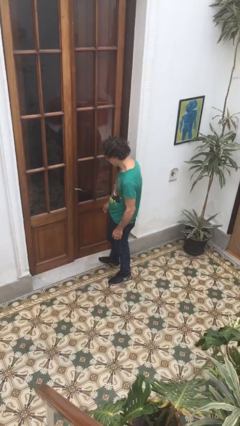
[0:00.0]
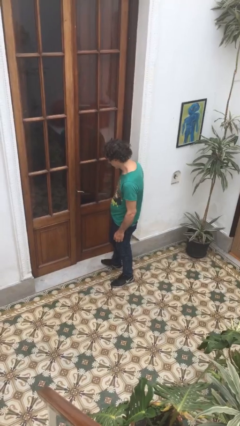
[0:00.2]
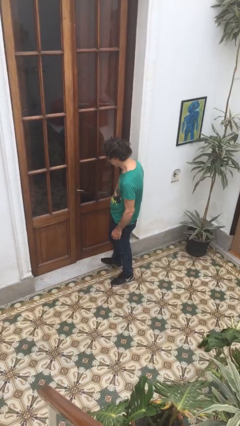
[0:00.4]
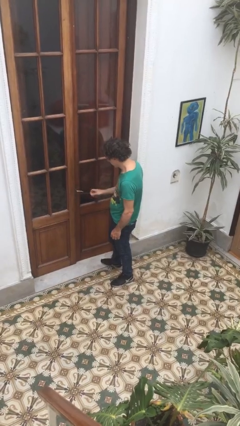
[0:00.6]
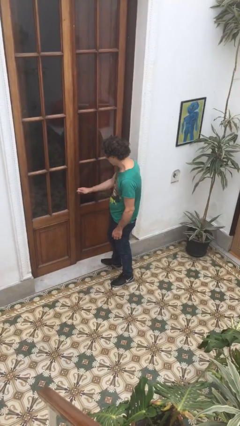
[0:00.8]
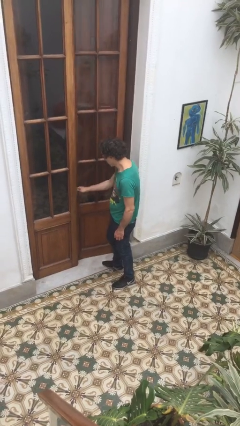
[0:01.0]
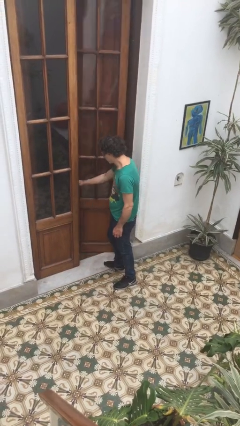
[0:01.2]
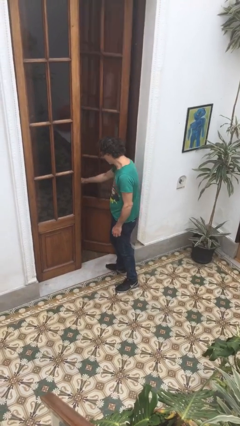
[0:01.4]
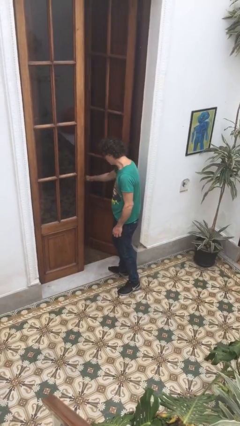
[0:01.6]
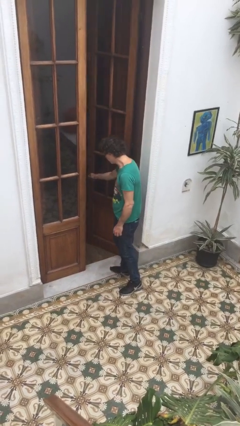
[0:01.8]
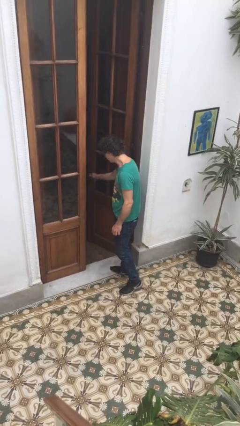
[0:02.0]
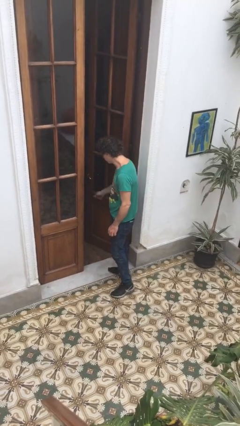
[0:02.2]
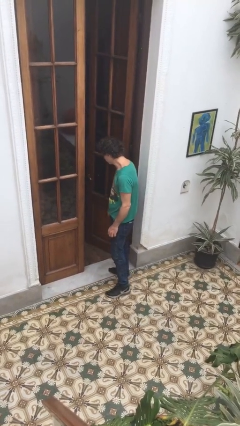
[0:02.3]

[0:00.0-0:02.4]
person opens facility door

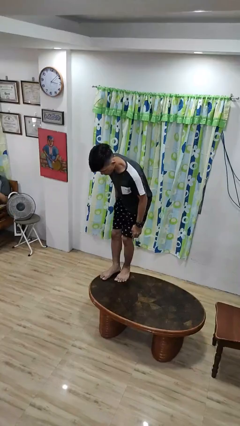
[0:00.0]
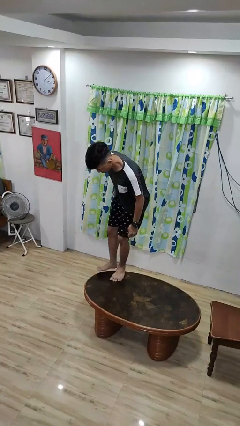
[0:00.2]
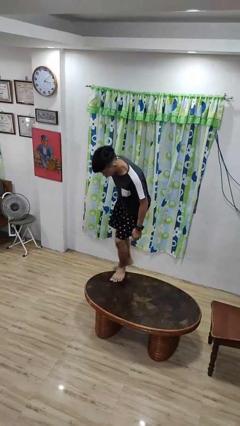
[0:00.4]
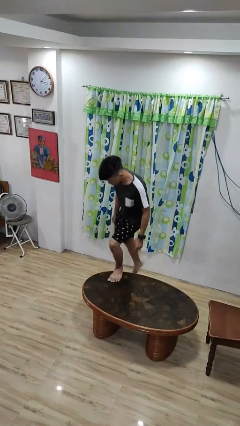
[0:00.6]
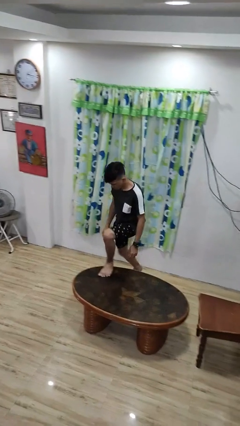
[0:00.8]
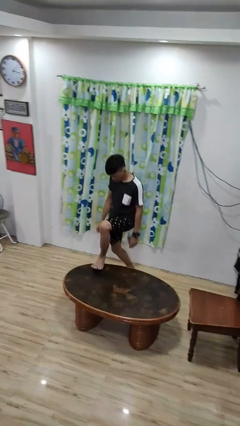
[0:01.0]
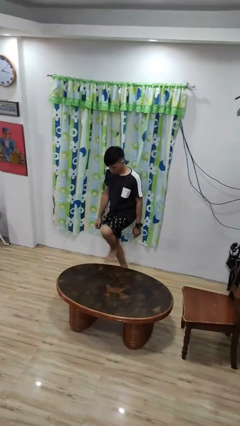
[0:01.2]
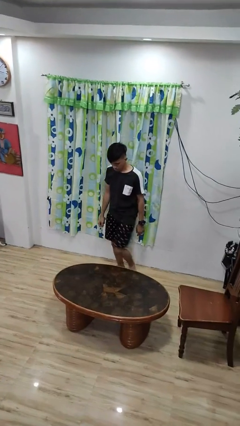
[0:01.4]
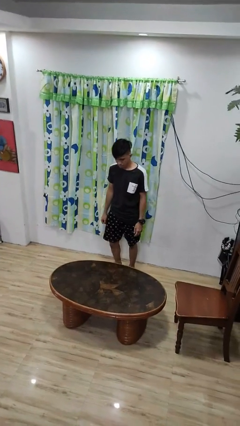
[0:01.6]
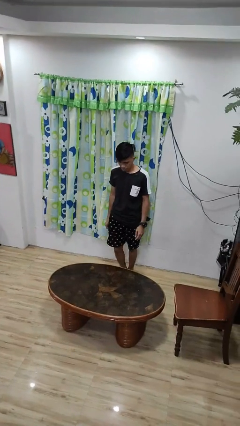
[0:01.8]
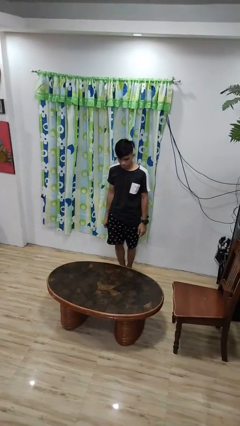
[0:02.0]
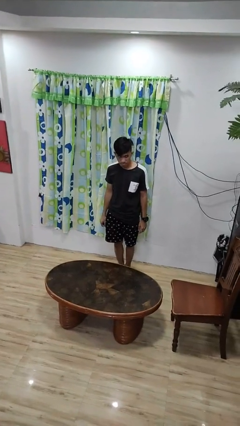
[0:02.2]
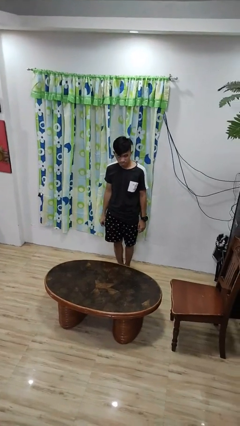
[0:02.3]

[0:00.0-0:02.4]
person climbs off table

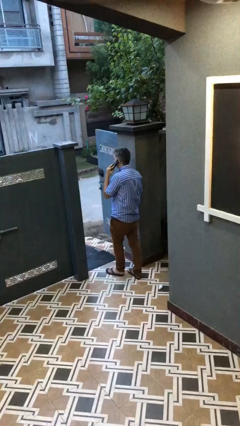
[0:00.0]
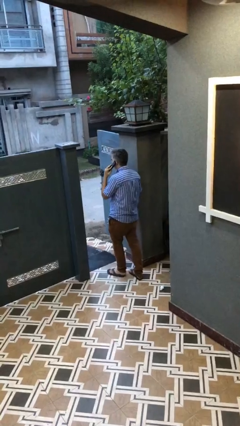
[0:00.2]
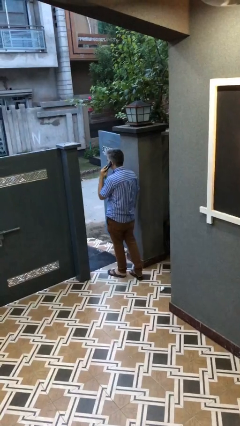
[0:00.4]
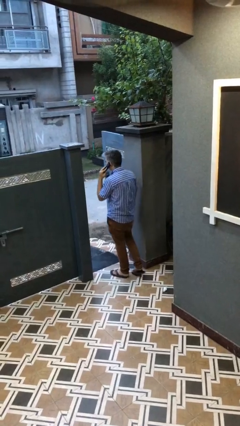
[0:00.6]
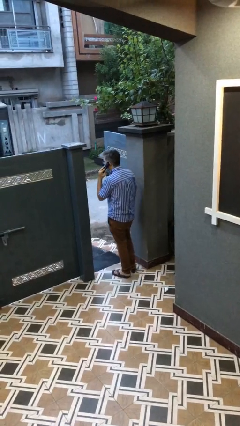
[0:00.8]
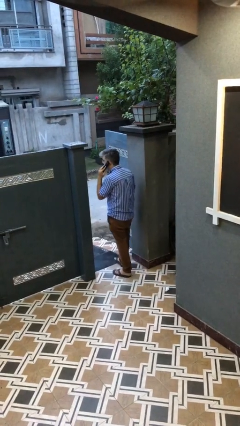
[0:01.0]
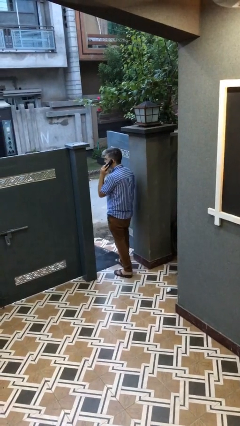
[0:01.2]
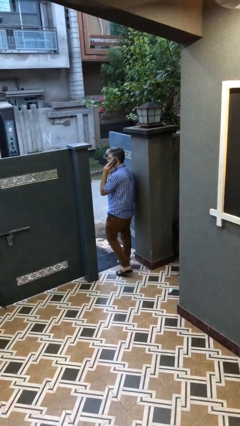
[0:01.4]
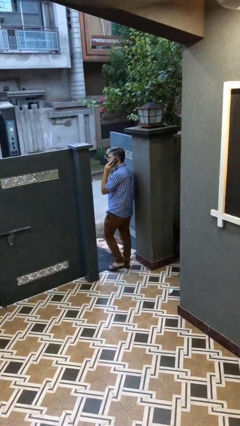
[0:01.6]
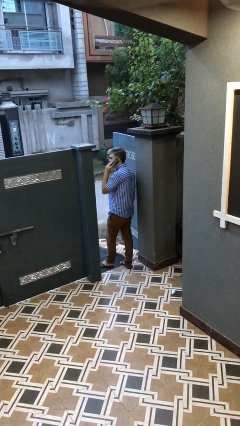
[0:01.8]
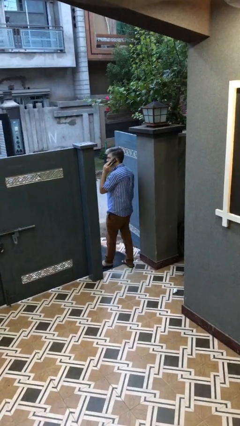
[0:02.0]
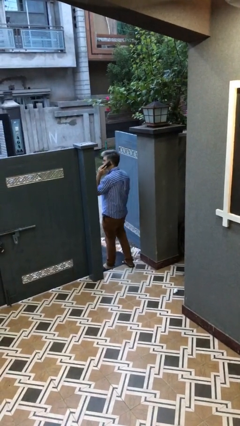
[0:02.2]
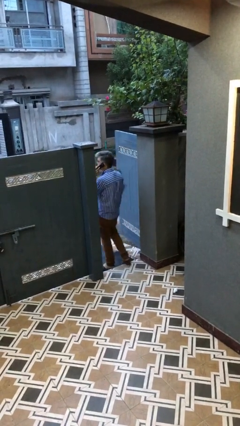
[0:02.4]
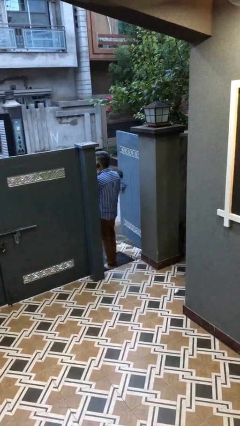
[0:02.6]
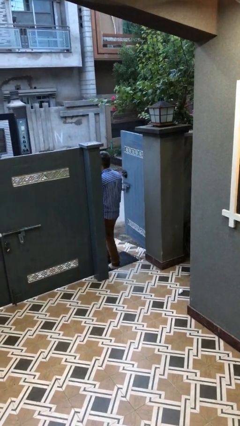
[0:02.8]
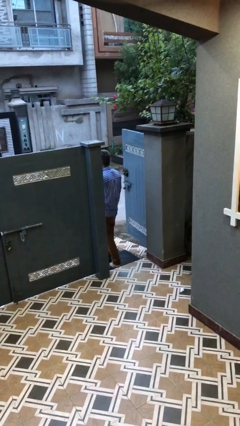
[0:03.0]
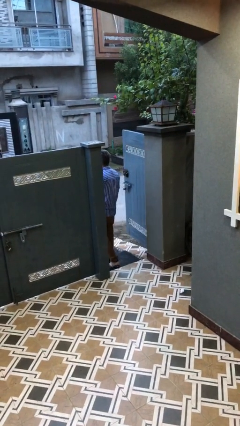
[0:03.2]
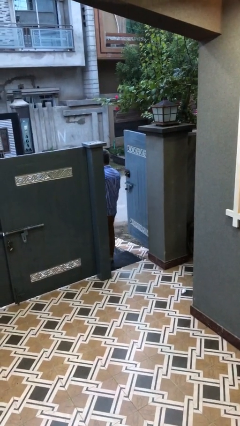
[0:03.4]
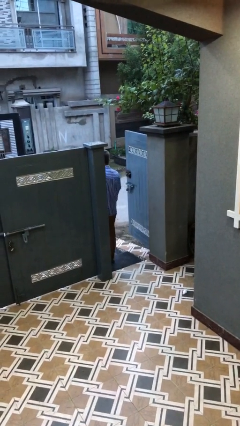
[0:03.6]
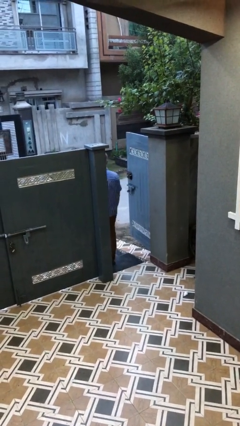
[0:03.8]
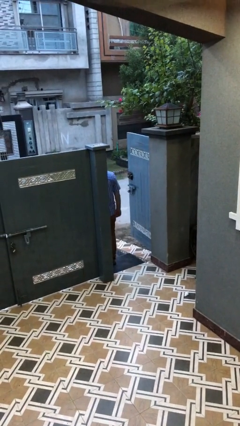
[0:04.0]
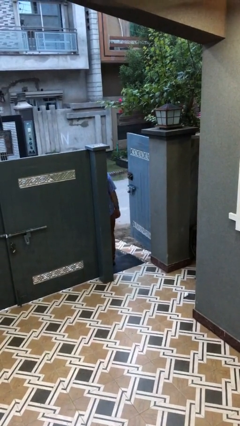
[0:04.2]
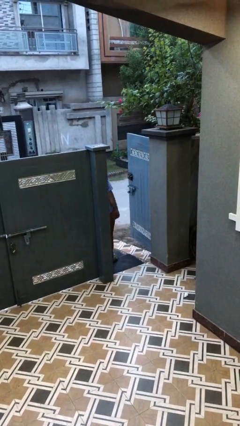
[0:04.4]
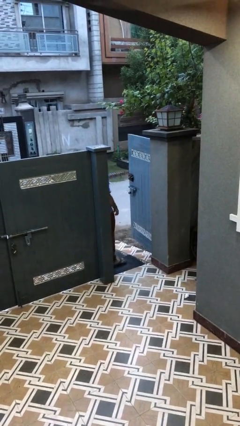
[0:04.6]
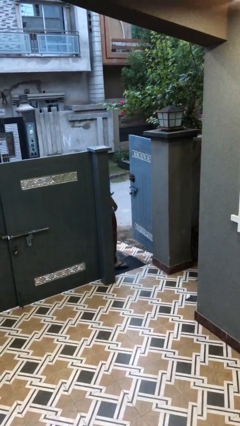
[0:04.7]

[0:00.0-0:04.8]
person exits scene through structure

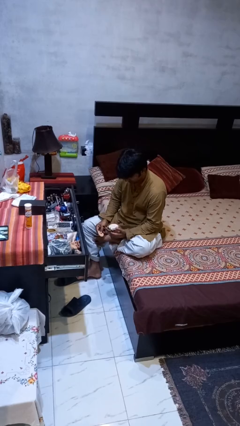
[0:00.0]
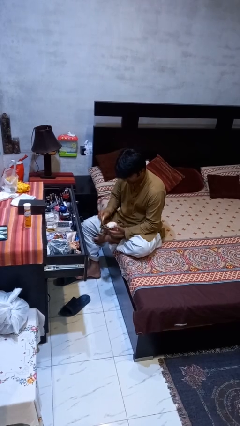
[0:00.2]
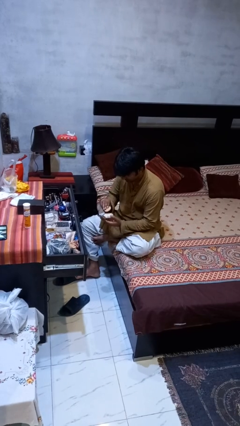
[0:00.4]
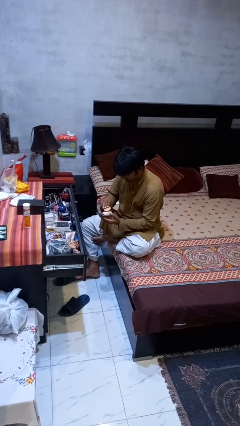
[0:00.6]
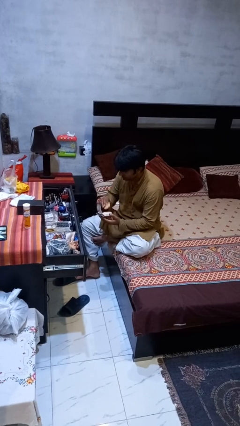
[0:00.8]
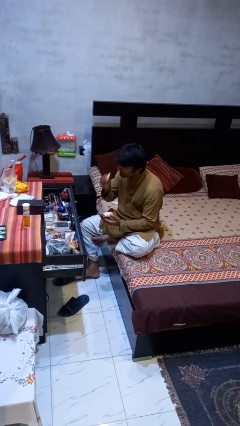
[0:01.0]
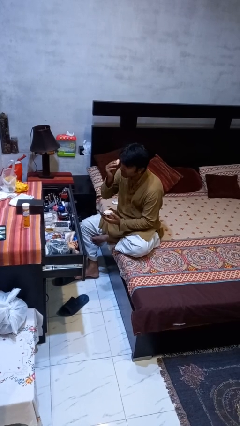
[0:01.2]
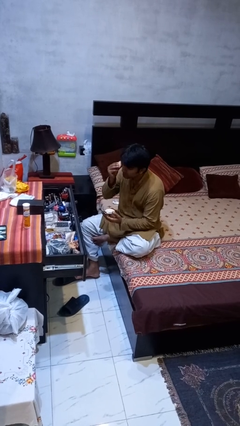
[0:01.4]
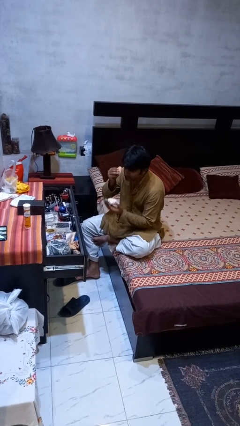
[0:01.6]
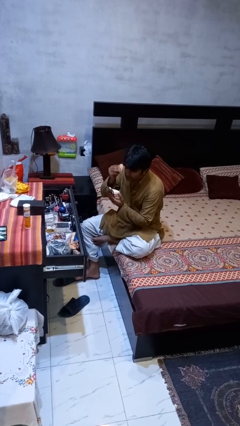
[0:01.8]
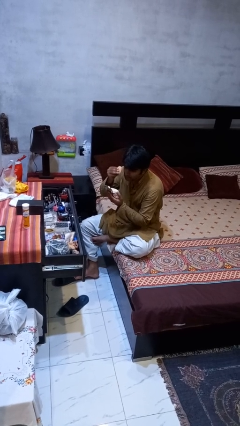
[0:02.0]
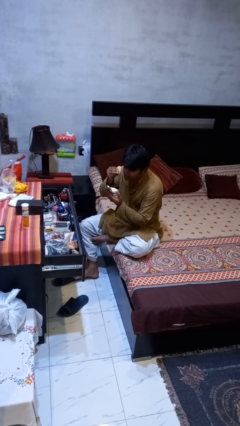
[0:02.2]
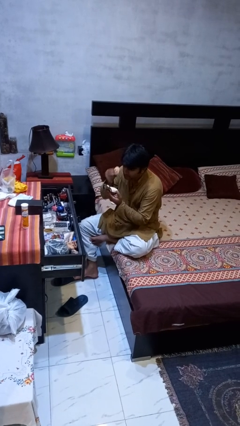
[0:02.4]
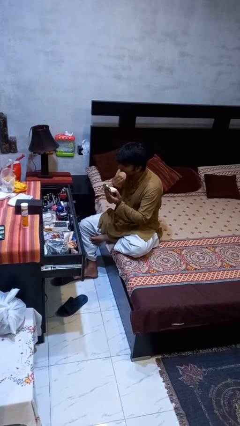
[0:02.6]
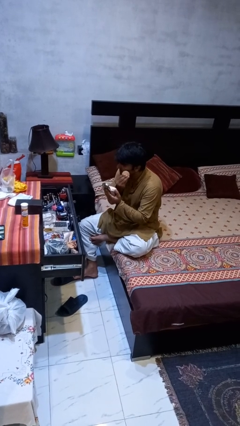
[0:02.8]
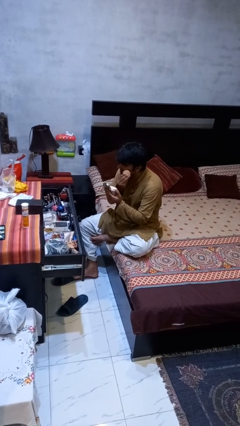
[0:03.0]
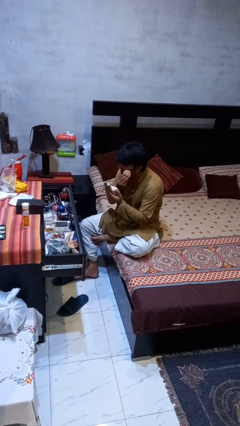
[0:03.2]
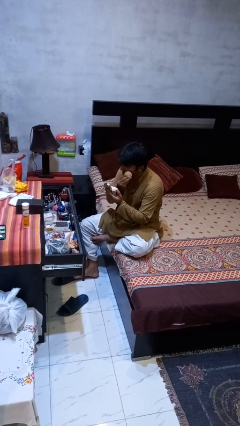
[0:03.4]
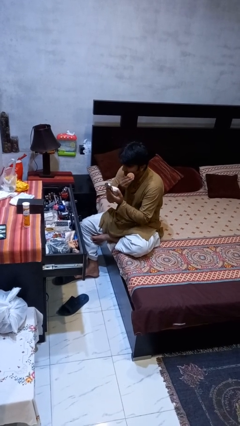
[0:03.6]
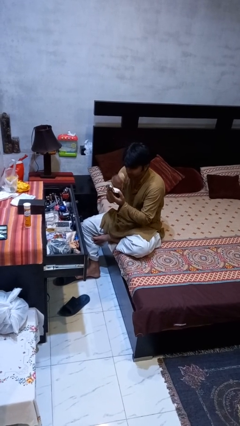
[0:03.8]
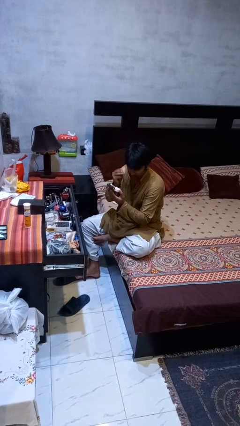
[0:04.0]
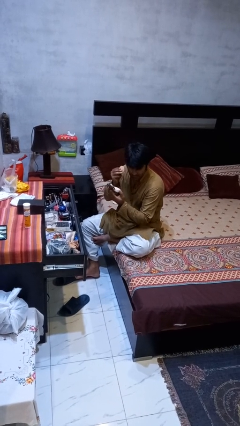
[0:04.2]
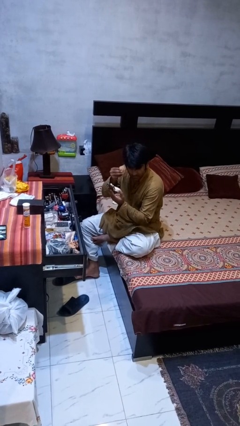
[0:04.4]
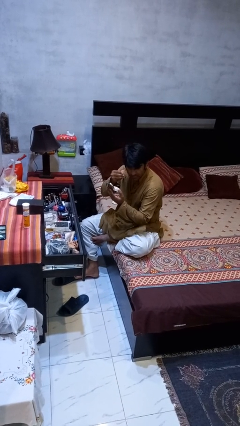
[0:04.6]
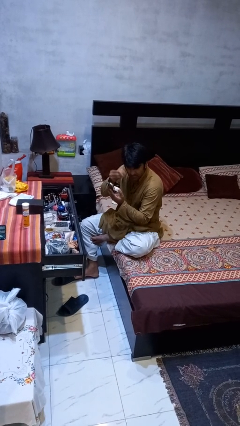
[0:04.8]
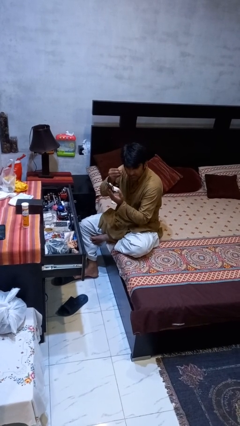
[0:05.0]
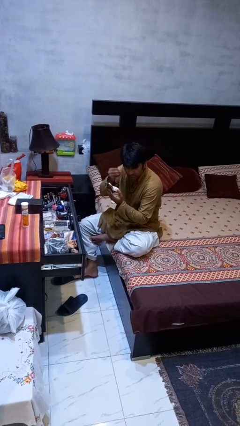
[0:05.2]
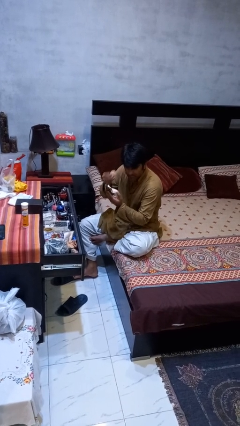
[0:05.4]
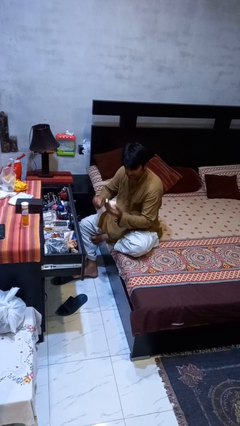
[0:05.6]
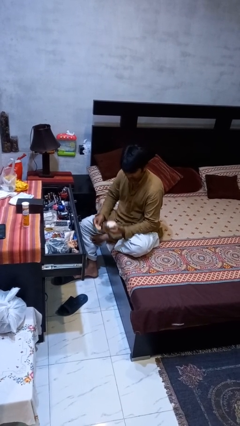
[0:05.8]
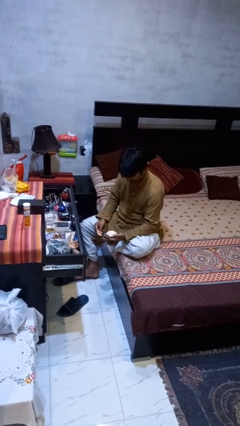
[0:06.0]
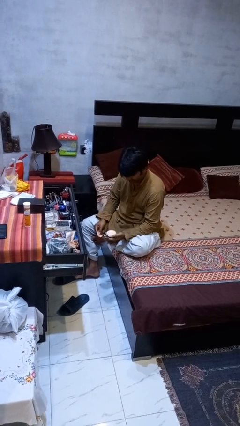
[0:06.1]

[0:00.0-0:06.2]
person applies foundation makeup

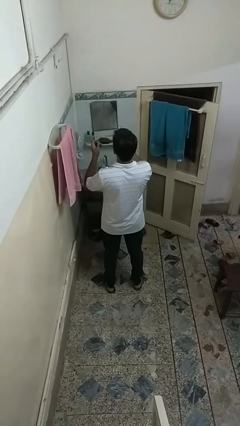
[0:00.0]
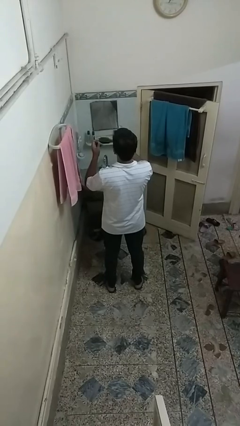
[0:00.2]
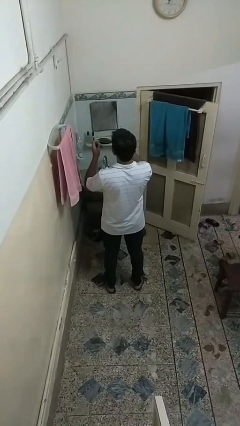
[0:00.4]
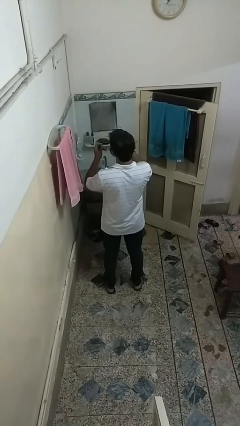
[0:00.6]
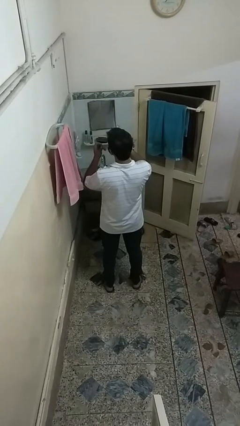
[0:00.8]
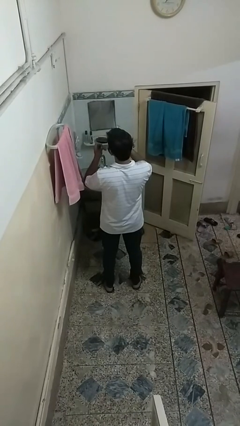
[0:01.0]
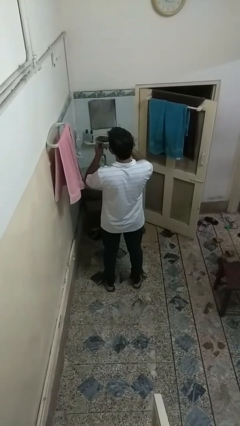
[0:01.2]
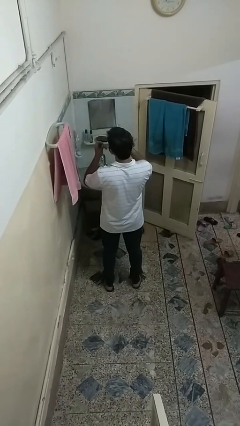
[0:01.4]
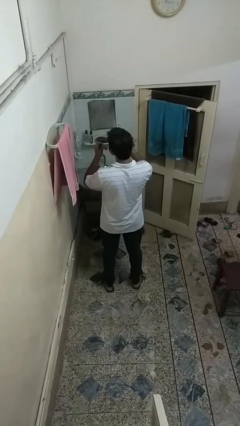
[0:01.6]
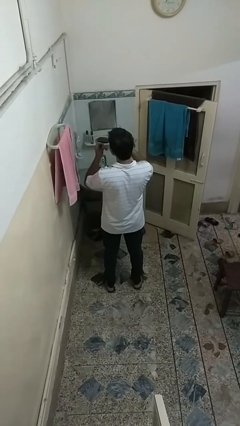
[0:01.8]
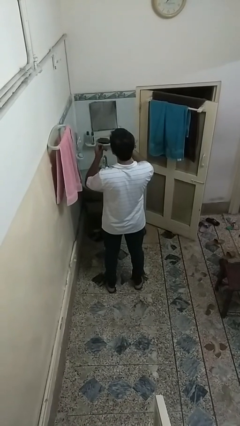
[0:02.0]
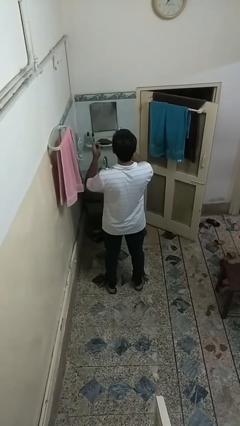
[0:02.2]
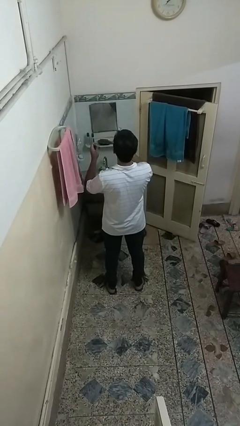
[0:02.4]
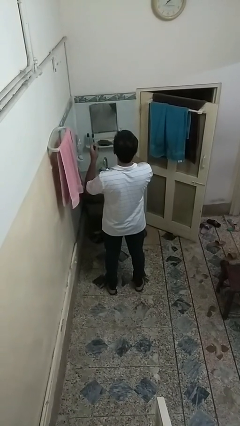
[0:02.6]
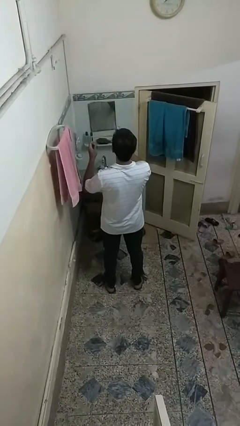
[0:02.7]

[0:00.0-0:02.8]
person flosses
